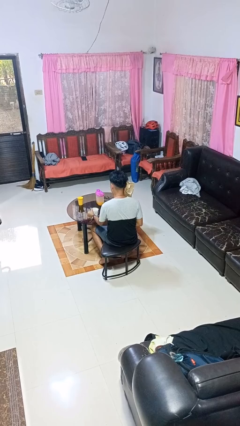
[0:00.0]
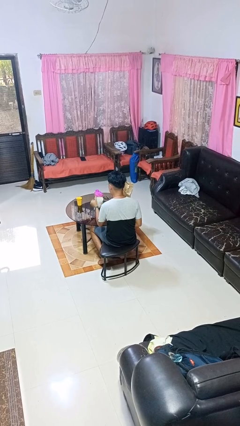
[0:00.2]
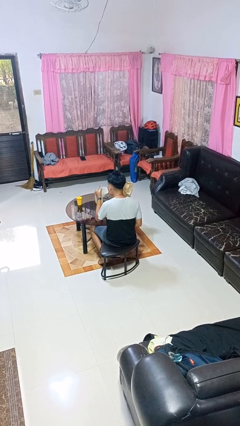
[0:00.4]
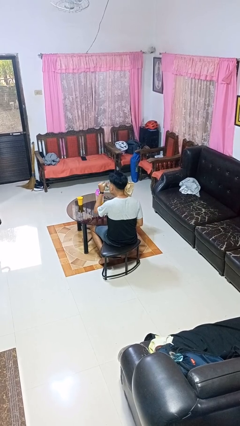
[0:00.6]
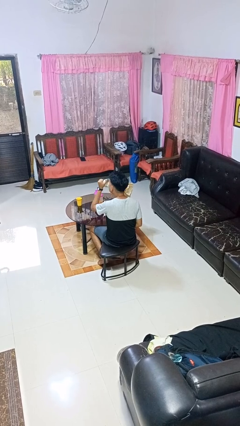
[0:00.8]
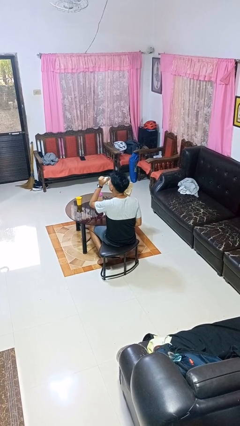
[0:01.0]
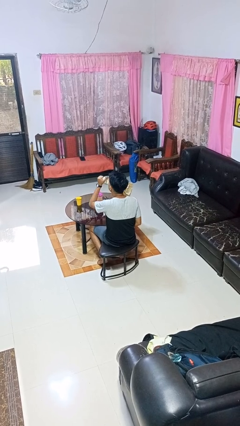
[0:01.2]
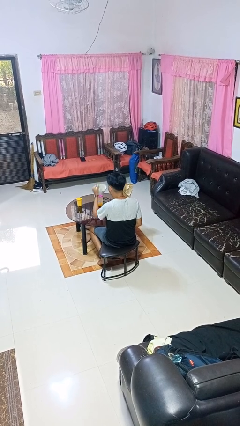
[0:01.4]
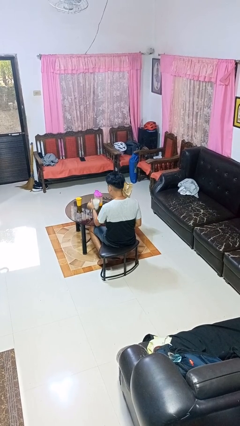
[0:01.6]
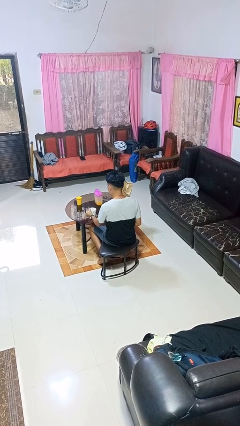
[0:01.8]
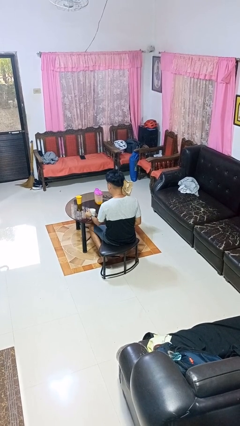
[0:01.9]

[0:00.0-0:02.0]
person drinks from mug

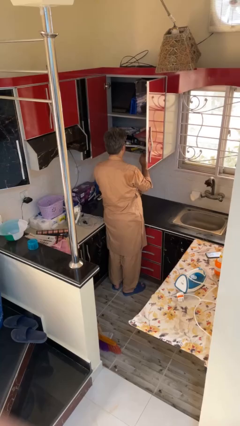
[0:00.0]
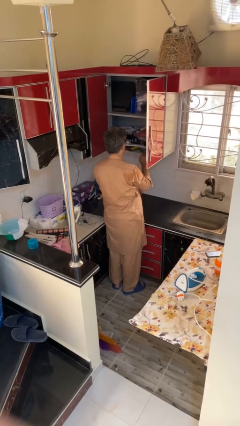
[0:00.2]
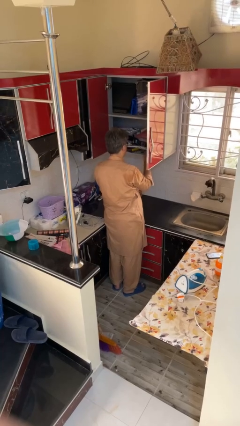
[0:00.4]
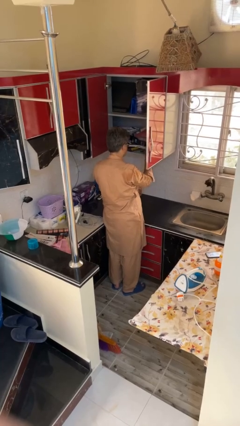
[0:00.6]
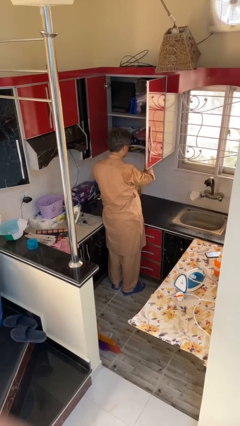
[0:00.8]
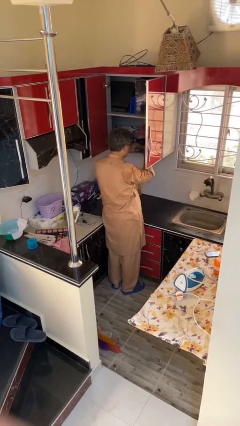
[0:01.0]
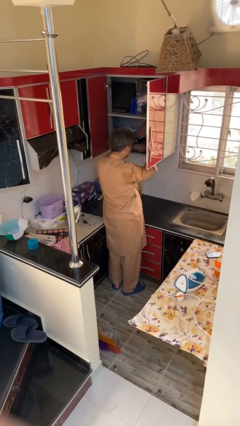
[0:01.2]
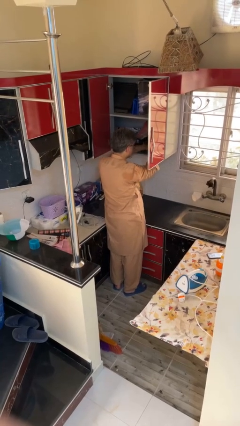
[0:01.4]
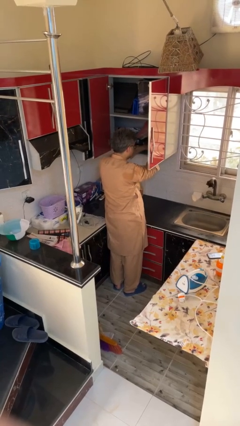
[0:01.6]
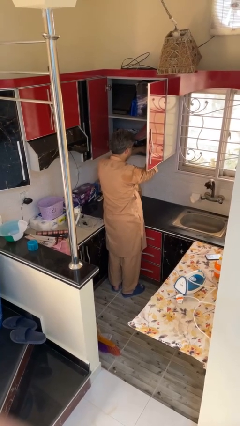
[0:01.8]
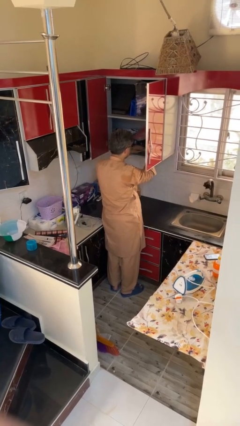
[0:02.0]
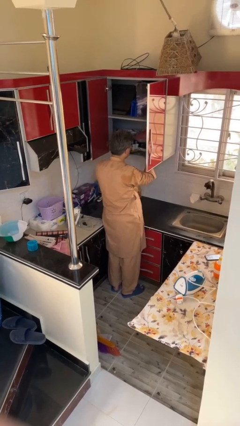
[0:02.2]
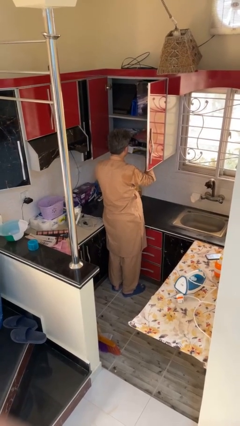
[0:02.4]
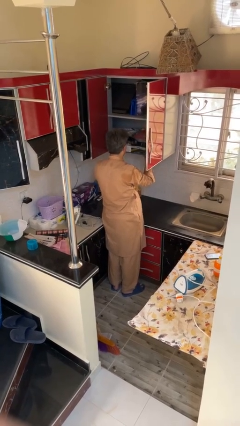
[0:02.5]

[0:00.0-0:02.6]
person searches in cabinet

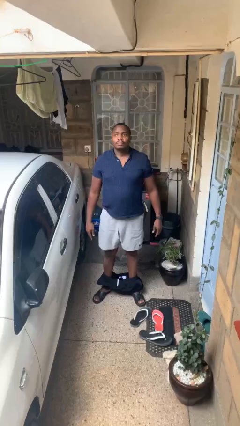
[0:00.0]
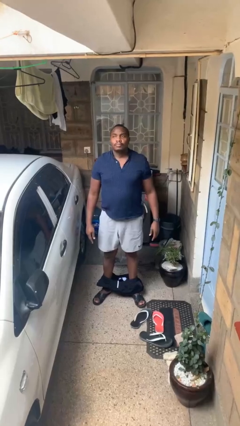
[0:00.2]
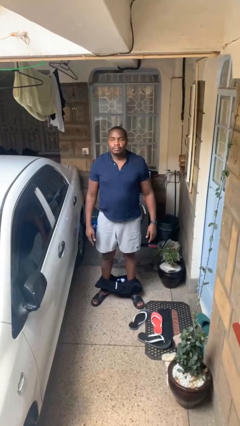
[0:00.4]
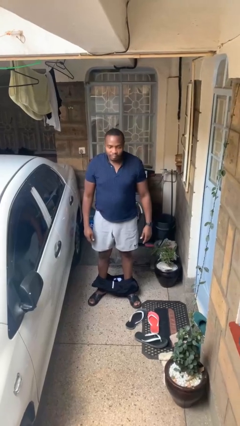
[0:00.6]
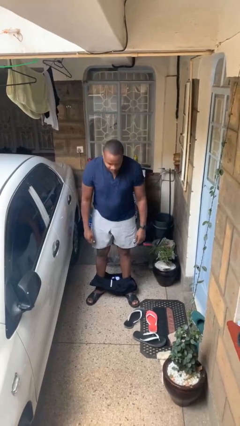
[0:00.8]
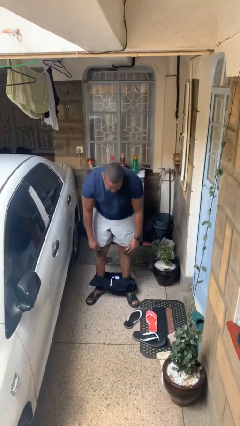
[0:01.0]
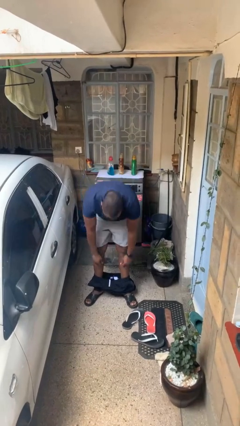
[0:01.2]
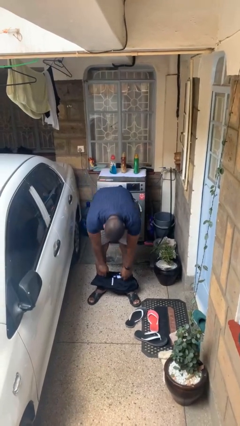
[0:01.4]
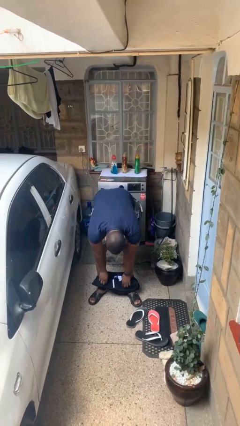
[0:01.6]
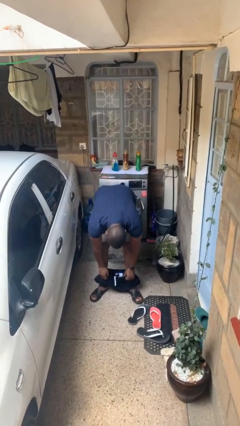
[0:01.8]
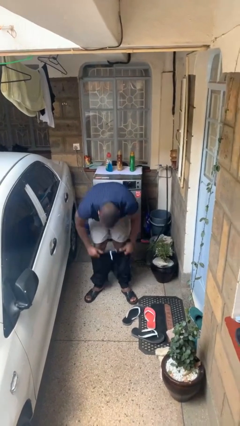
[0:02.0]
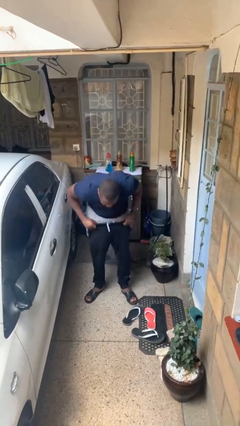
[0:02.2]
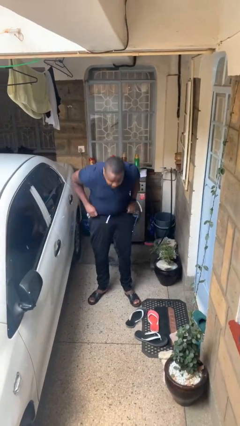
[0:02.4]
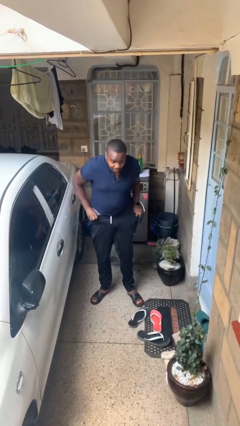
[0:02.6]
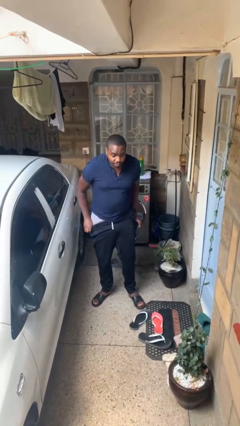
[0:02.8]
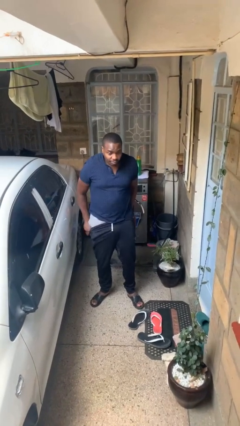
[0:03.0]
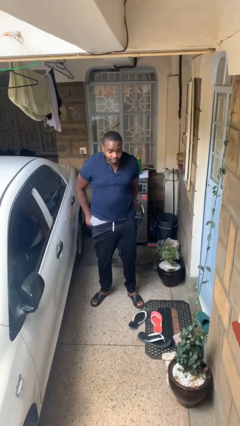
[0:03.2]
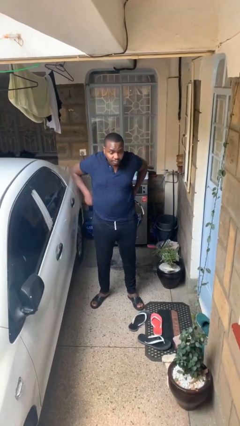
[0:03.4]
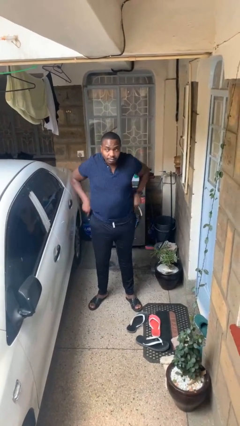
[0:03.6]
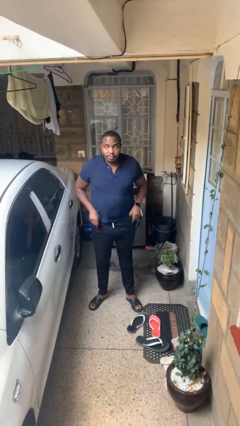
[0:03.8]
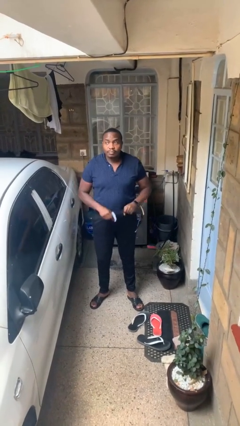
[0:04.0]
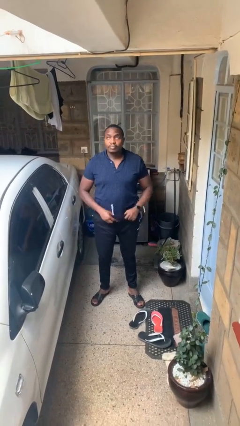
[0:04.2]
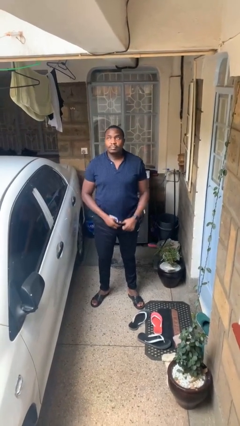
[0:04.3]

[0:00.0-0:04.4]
person puts on pants

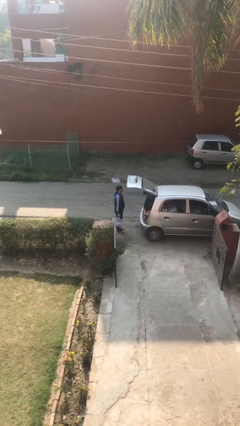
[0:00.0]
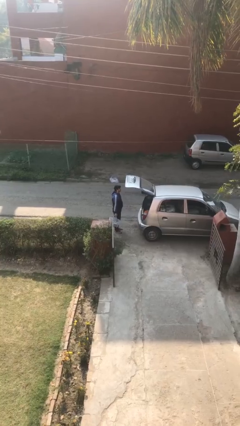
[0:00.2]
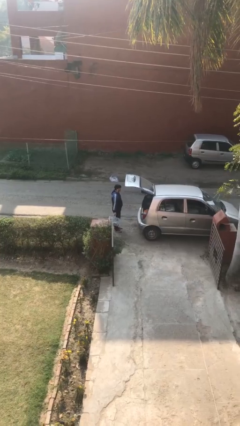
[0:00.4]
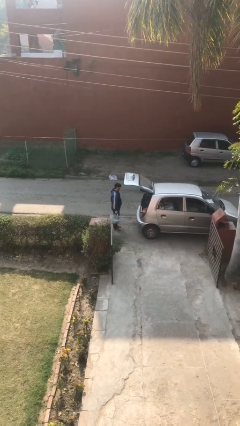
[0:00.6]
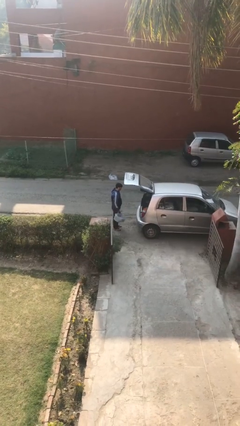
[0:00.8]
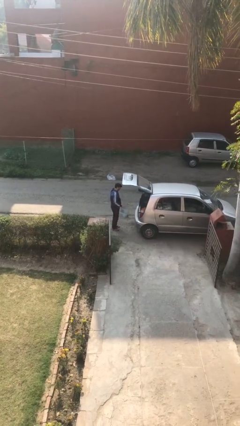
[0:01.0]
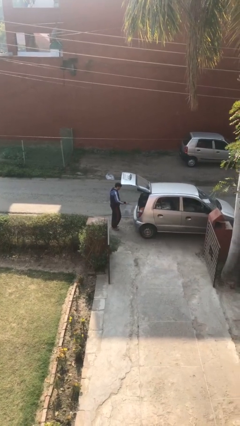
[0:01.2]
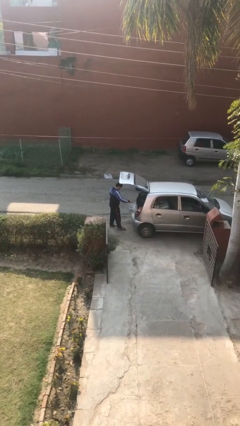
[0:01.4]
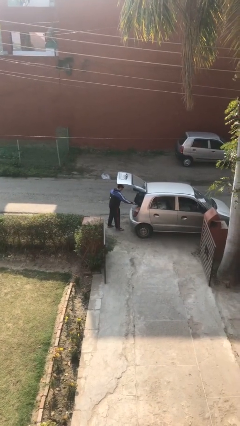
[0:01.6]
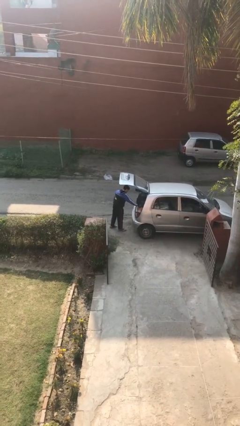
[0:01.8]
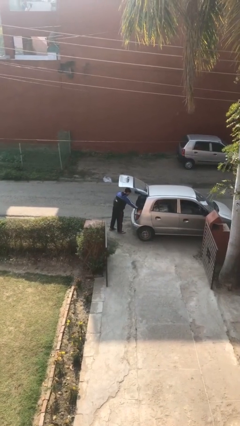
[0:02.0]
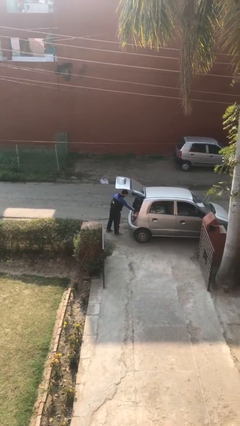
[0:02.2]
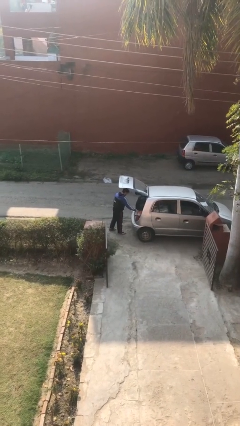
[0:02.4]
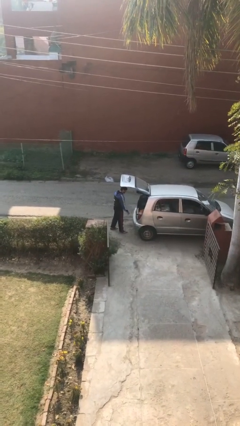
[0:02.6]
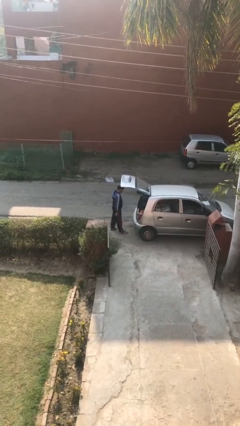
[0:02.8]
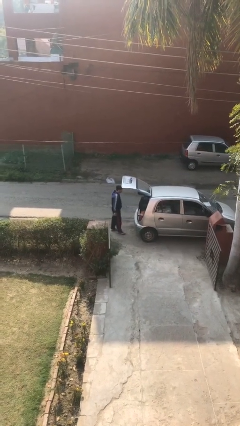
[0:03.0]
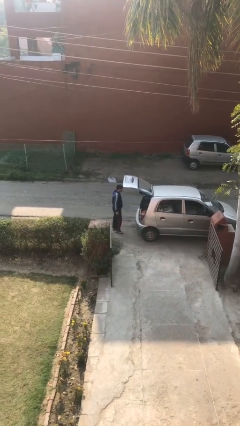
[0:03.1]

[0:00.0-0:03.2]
person loads car

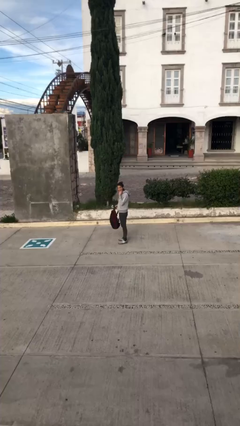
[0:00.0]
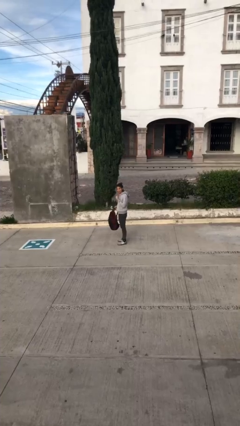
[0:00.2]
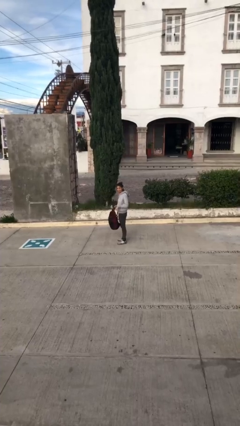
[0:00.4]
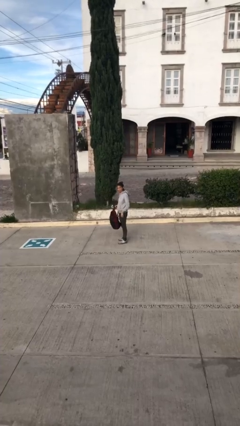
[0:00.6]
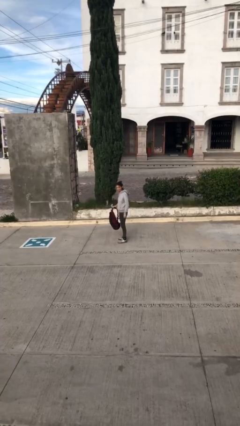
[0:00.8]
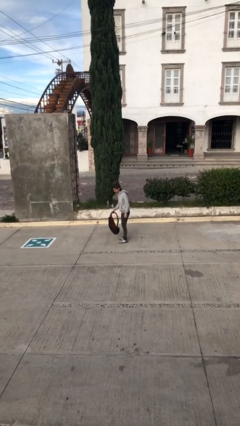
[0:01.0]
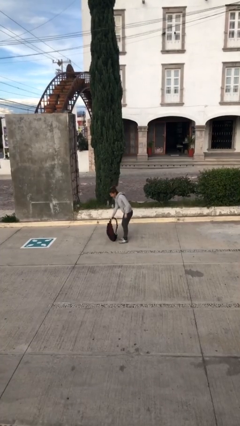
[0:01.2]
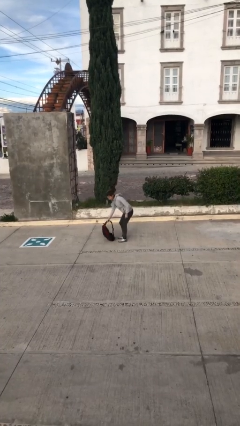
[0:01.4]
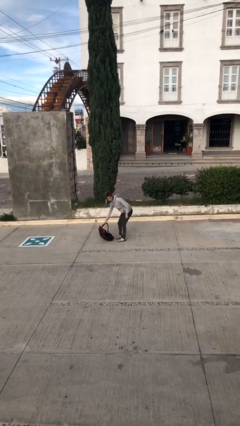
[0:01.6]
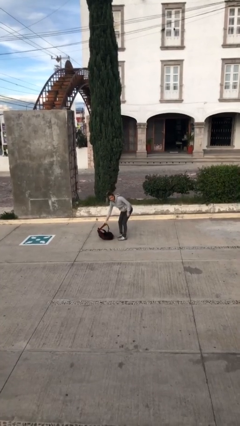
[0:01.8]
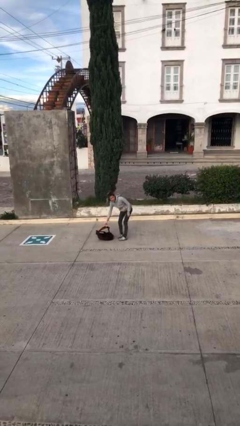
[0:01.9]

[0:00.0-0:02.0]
person puts down object on floor

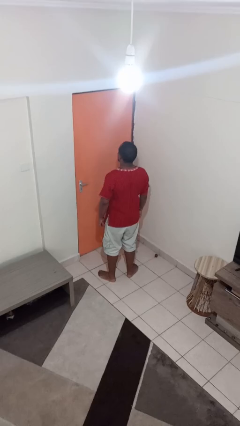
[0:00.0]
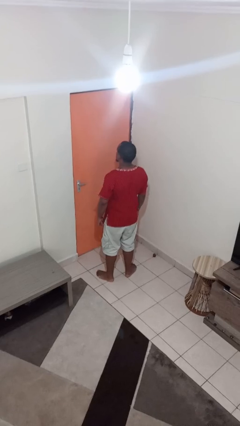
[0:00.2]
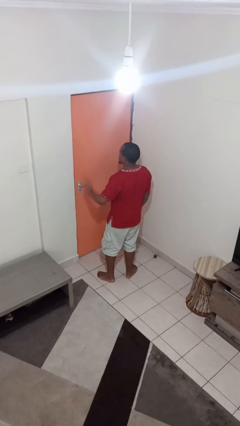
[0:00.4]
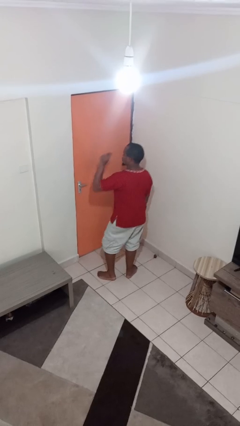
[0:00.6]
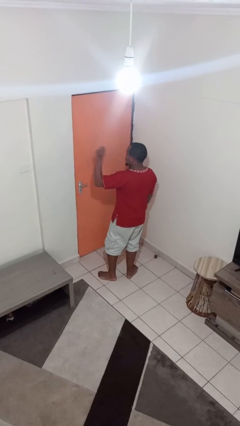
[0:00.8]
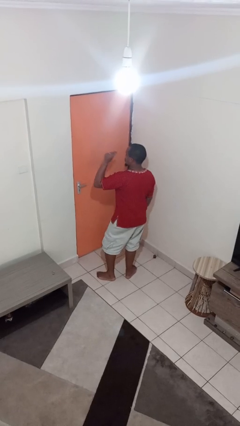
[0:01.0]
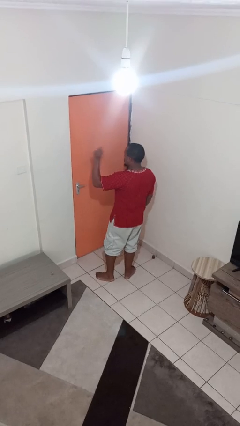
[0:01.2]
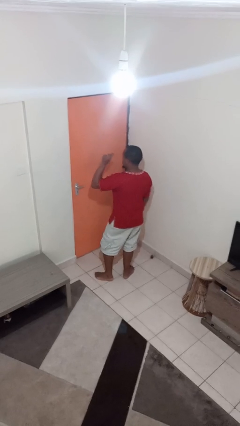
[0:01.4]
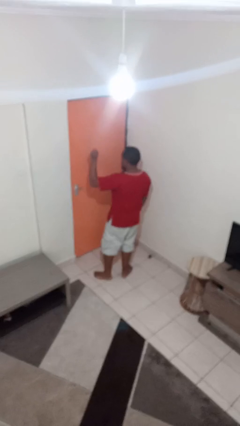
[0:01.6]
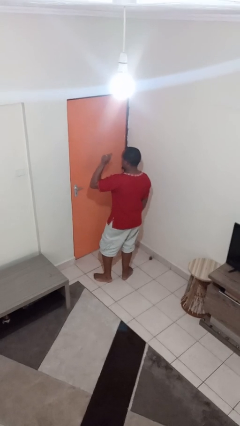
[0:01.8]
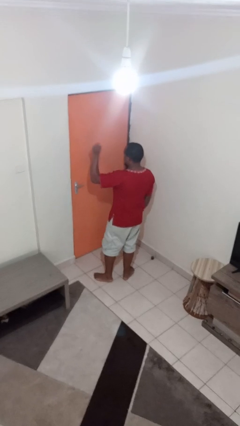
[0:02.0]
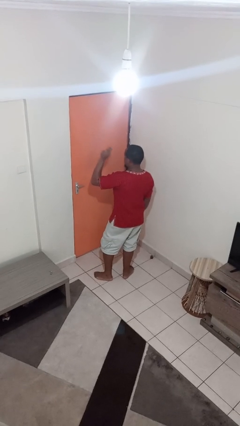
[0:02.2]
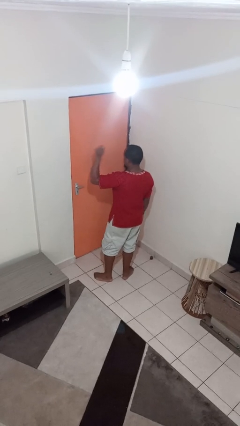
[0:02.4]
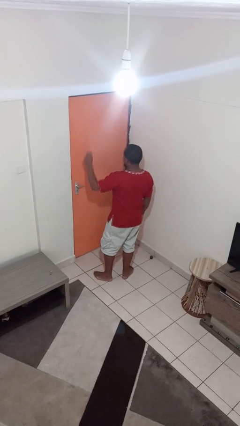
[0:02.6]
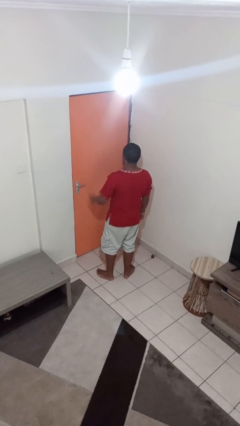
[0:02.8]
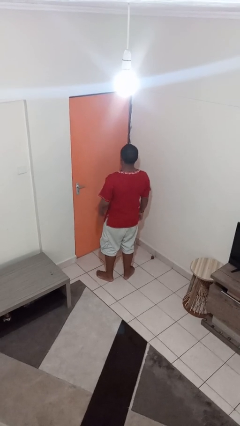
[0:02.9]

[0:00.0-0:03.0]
person snaps fingers

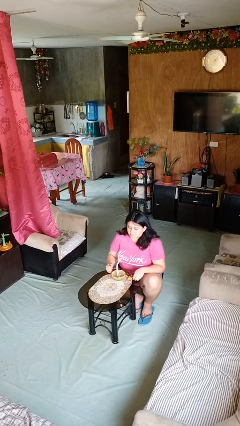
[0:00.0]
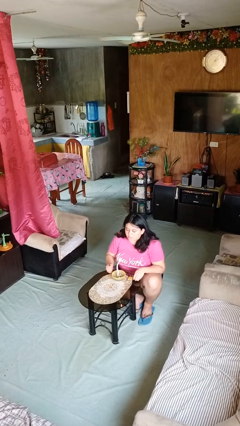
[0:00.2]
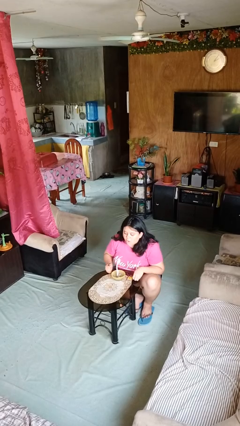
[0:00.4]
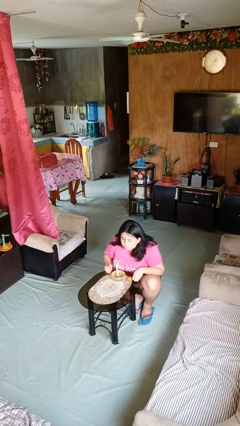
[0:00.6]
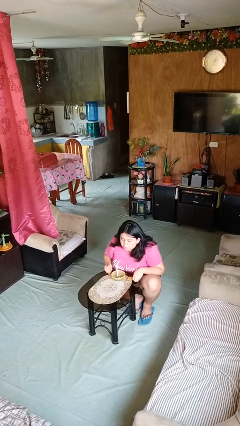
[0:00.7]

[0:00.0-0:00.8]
person extinguishes candle
